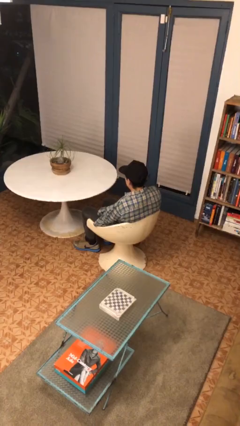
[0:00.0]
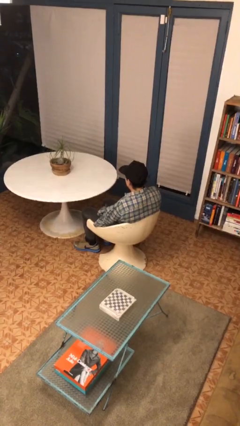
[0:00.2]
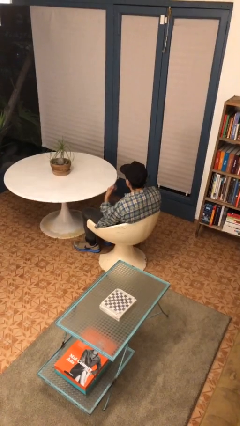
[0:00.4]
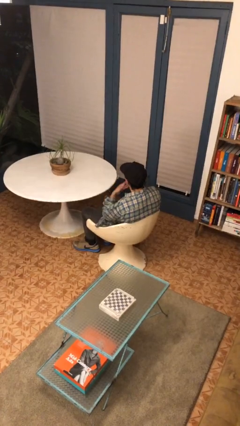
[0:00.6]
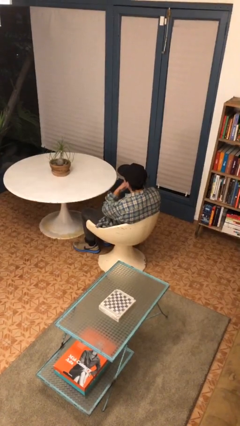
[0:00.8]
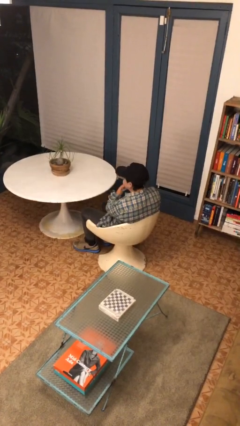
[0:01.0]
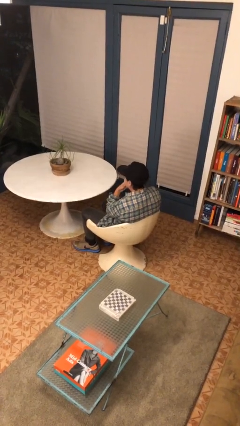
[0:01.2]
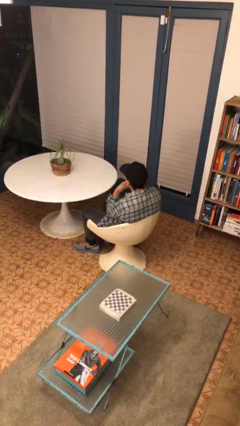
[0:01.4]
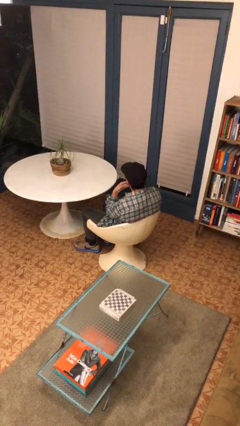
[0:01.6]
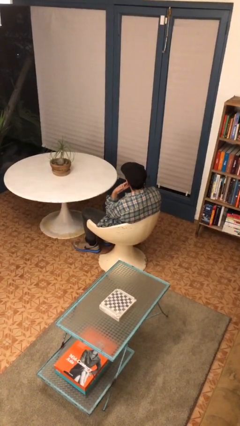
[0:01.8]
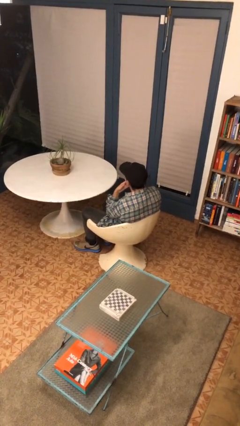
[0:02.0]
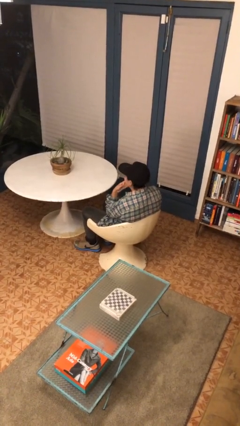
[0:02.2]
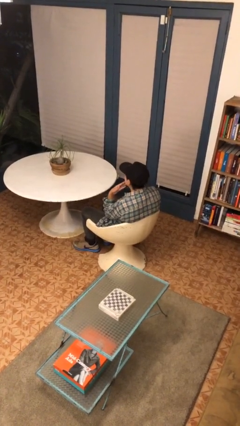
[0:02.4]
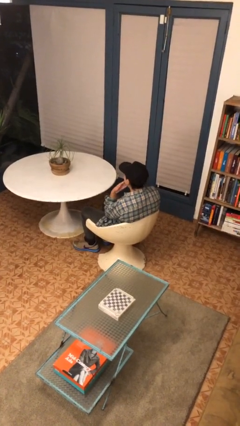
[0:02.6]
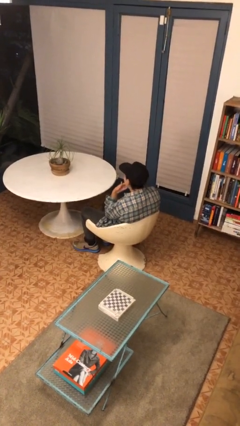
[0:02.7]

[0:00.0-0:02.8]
person strokes chin

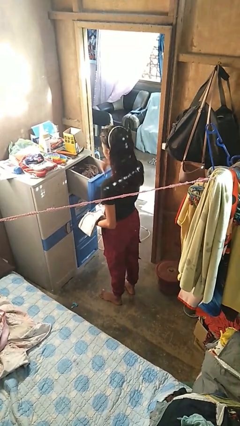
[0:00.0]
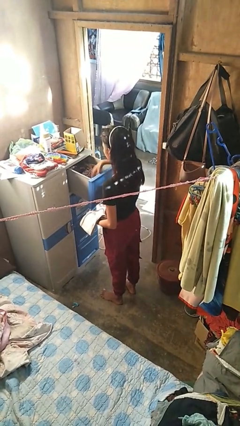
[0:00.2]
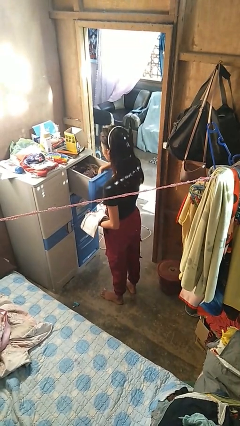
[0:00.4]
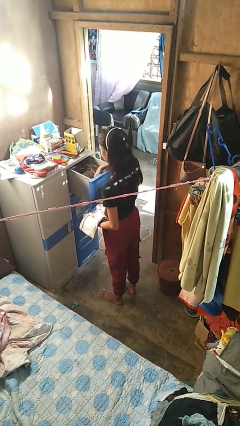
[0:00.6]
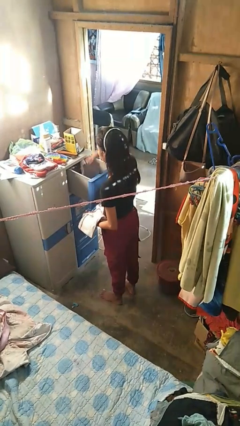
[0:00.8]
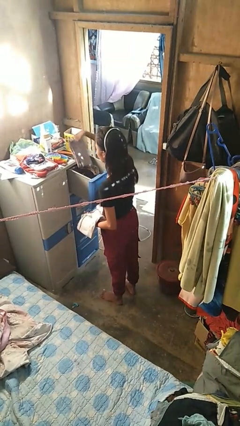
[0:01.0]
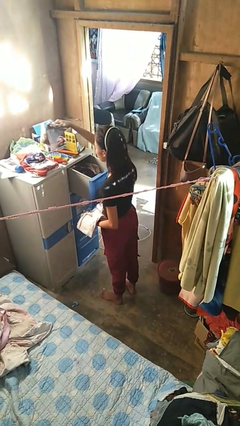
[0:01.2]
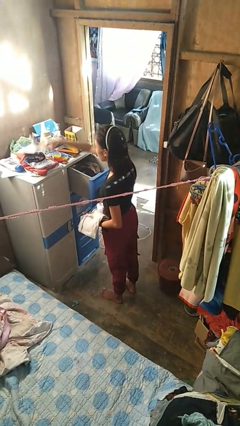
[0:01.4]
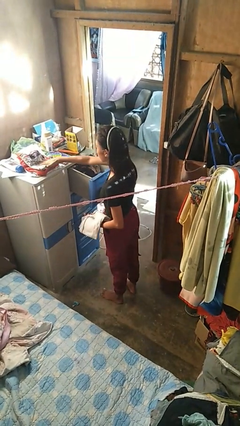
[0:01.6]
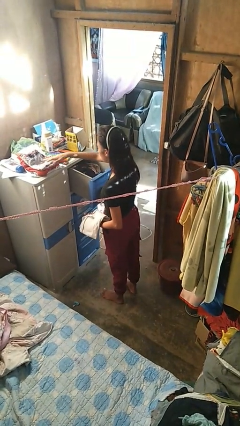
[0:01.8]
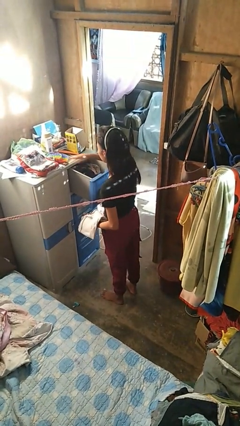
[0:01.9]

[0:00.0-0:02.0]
person takes clothes from dresser

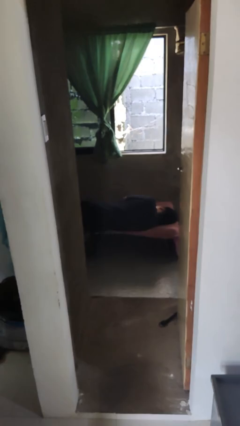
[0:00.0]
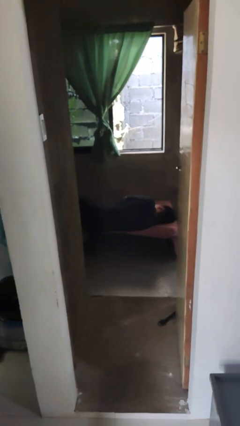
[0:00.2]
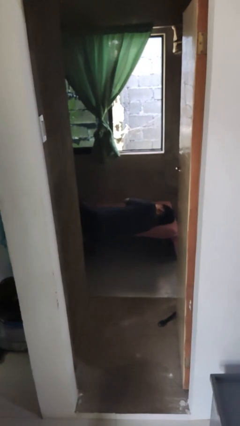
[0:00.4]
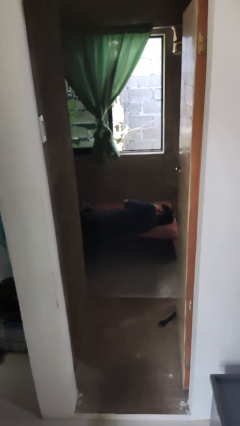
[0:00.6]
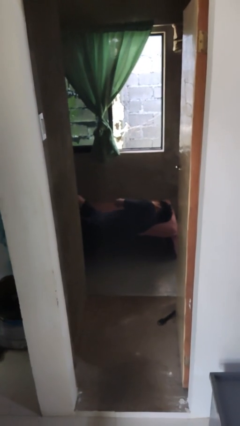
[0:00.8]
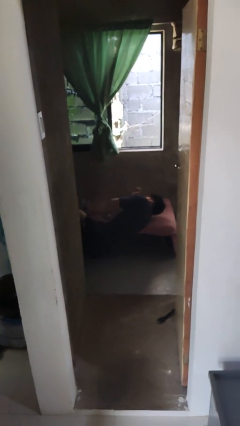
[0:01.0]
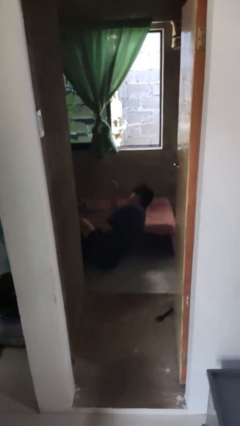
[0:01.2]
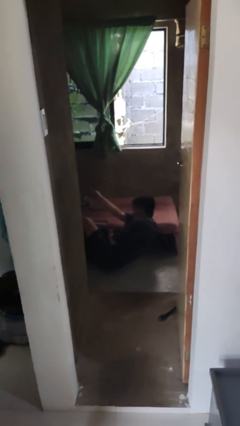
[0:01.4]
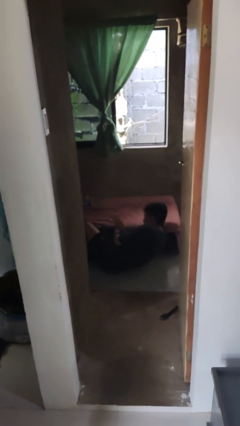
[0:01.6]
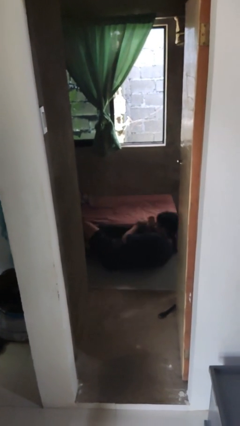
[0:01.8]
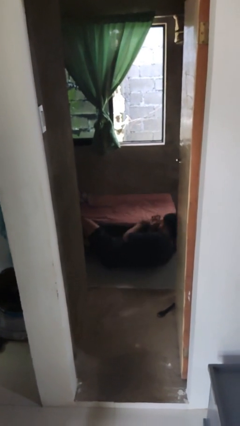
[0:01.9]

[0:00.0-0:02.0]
person falls from bed

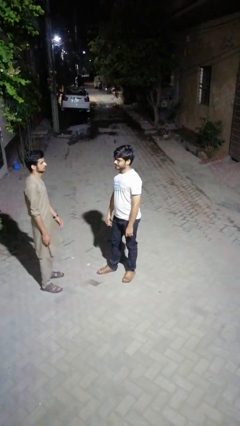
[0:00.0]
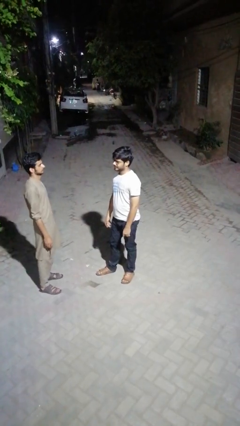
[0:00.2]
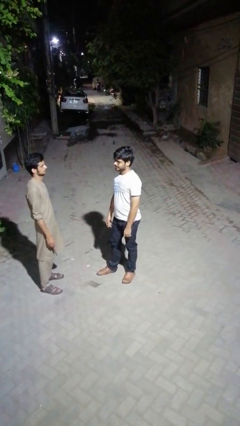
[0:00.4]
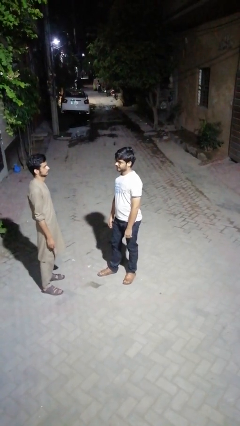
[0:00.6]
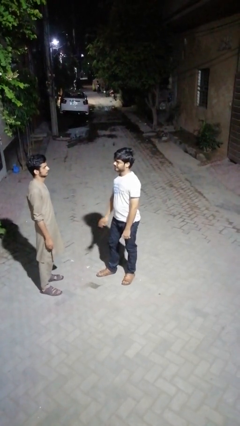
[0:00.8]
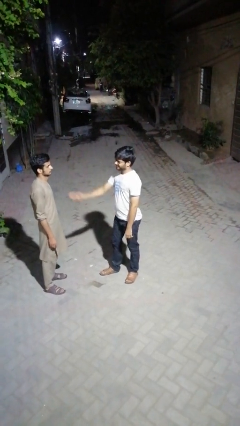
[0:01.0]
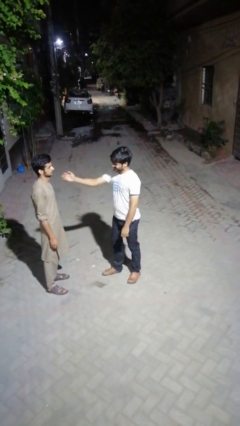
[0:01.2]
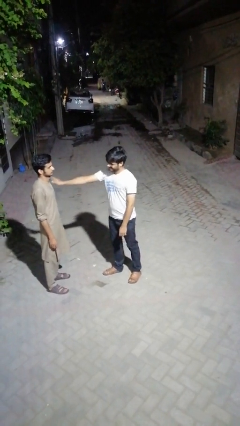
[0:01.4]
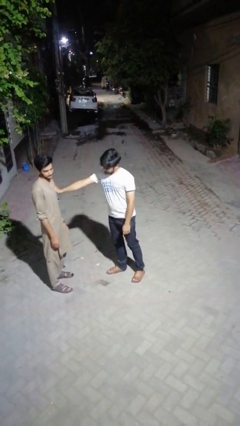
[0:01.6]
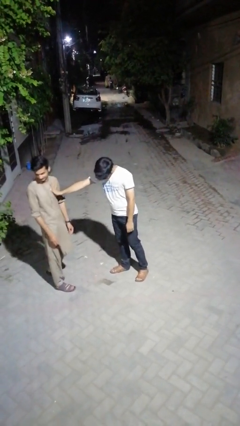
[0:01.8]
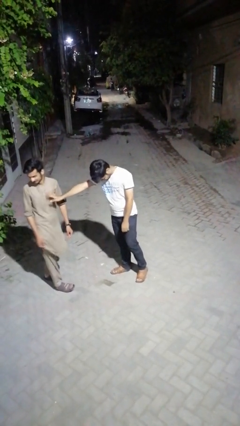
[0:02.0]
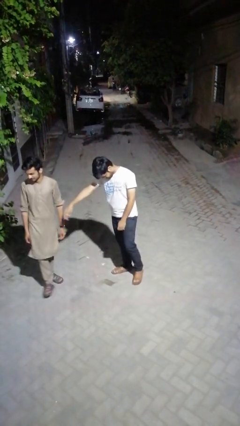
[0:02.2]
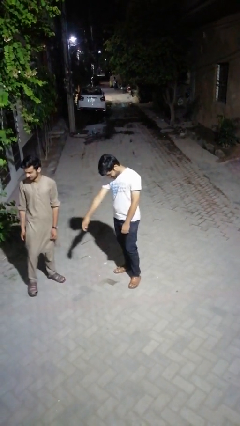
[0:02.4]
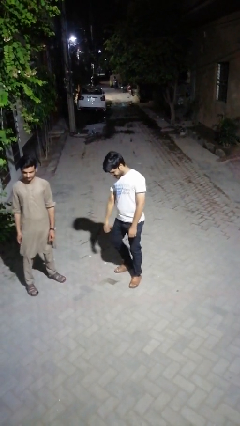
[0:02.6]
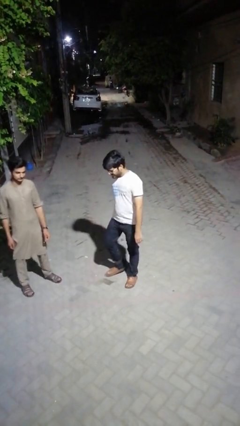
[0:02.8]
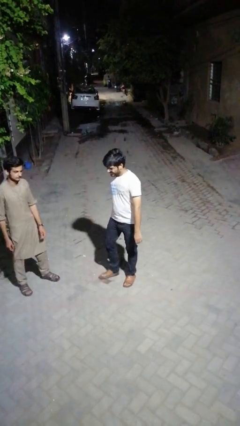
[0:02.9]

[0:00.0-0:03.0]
person shoves person

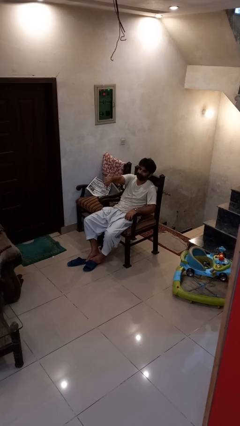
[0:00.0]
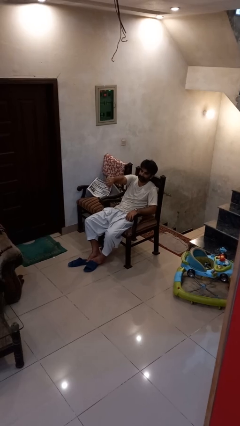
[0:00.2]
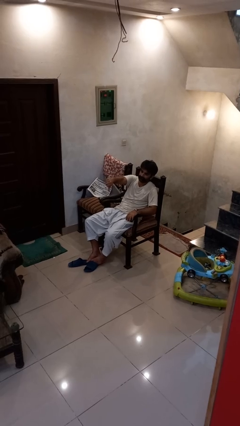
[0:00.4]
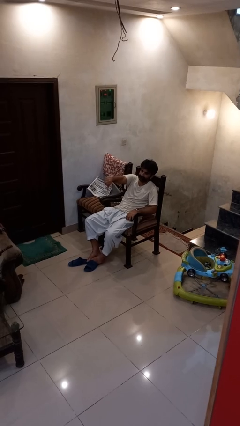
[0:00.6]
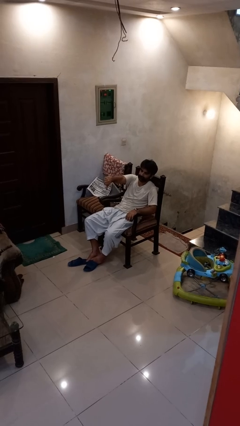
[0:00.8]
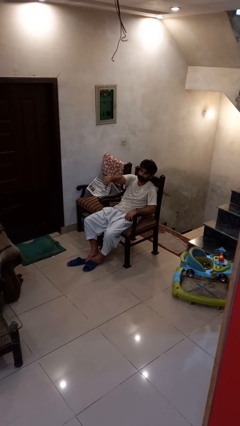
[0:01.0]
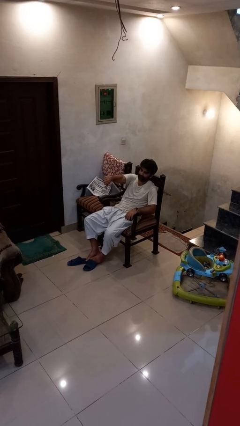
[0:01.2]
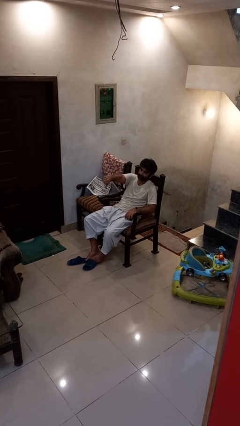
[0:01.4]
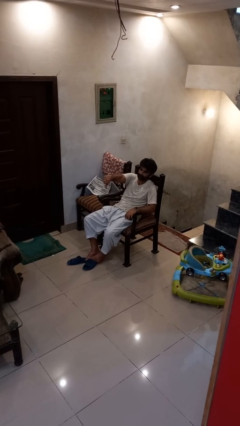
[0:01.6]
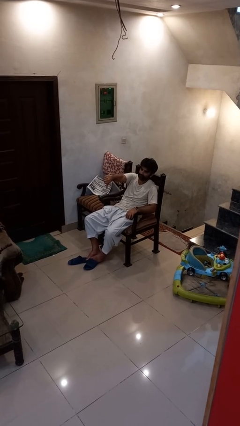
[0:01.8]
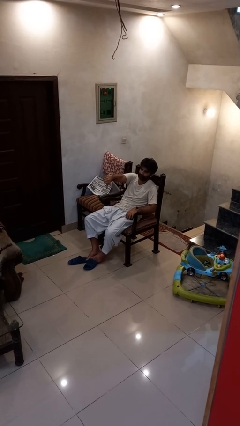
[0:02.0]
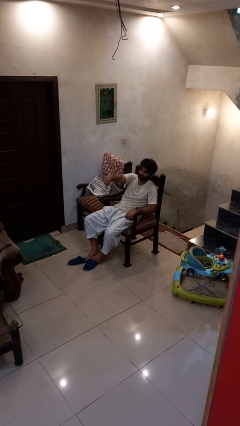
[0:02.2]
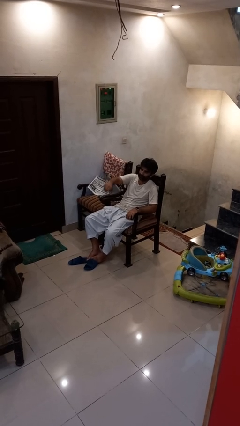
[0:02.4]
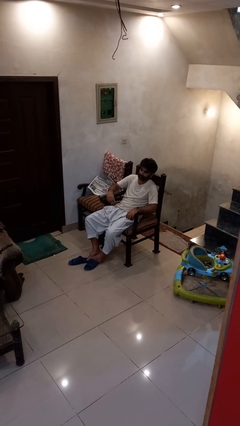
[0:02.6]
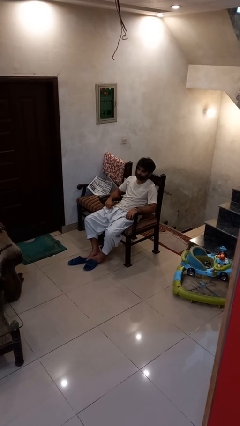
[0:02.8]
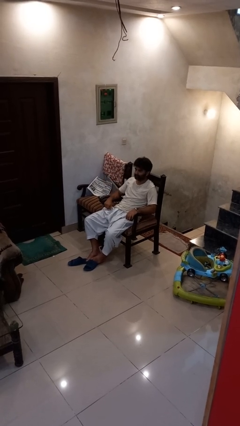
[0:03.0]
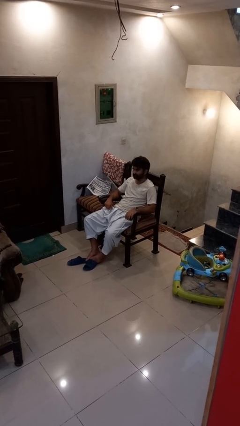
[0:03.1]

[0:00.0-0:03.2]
person gestures thumbs down

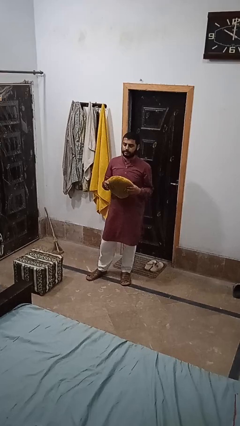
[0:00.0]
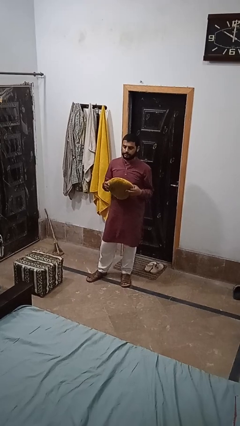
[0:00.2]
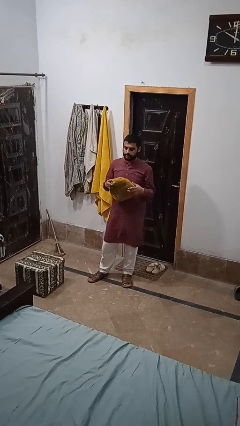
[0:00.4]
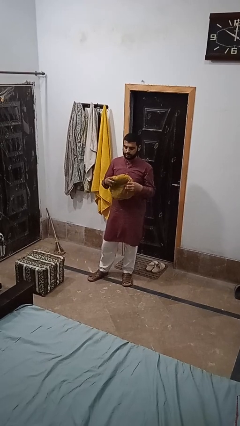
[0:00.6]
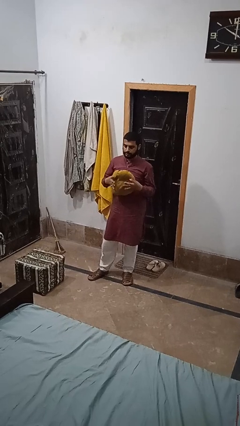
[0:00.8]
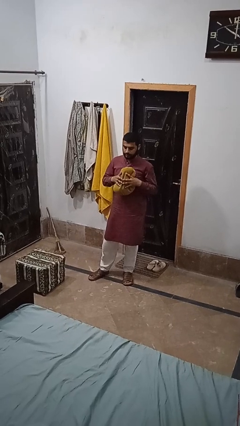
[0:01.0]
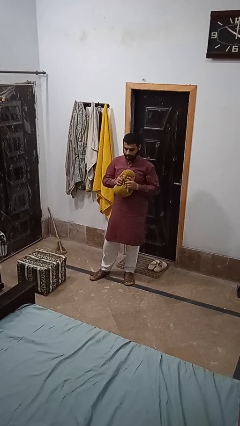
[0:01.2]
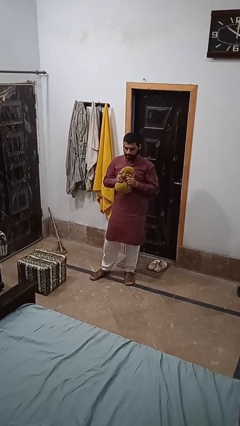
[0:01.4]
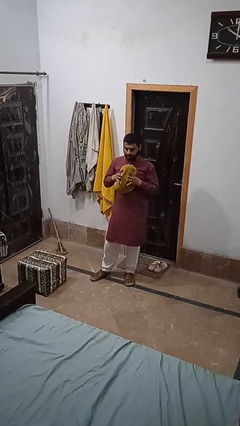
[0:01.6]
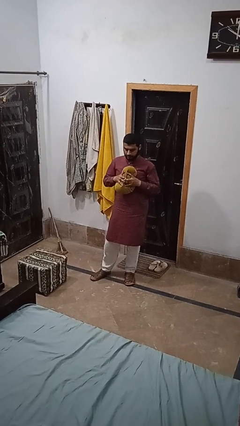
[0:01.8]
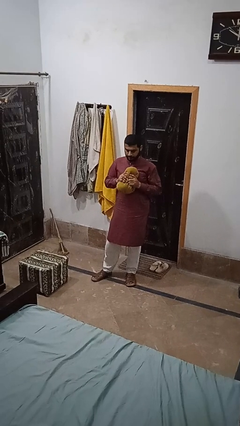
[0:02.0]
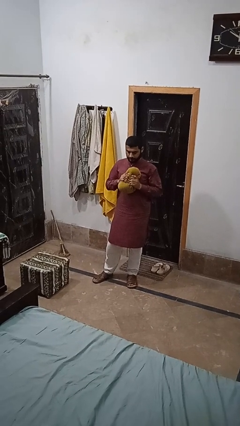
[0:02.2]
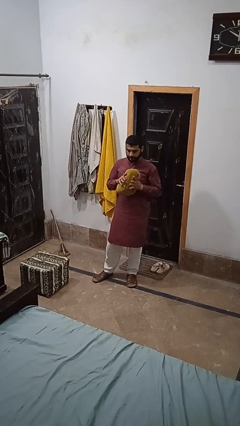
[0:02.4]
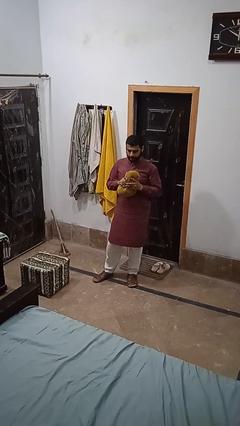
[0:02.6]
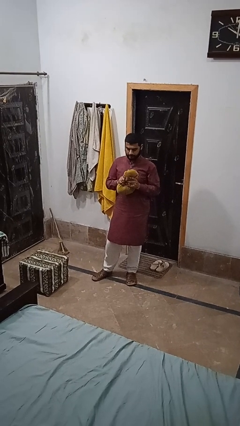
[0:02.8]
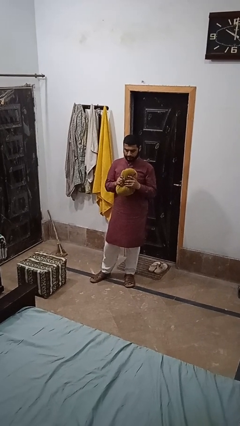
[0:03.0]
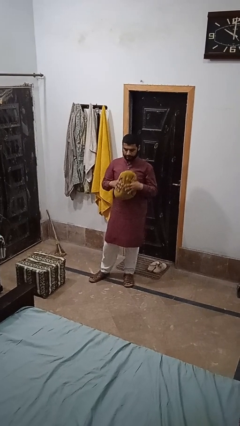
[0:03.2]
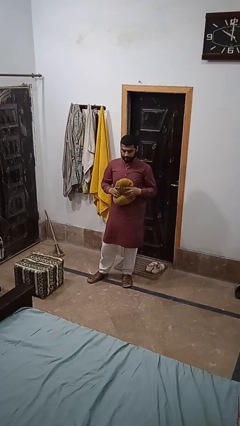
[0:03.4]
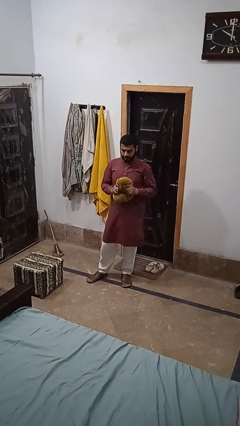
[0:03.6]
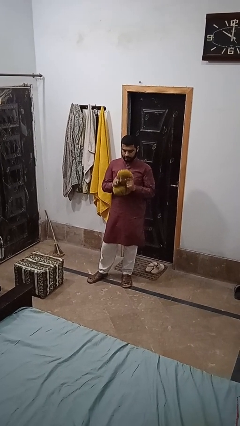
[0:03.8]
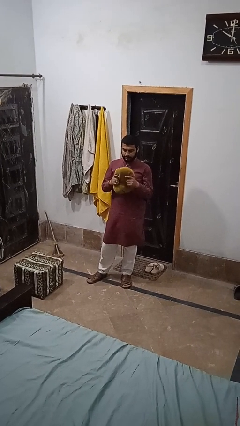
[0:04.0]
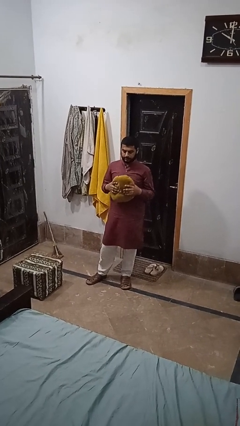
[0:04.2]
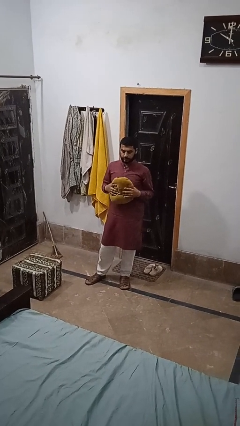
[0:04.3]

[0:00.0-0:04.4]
person squeezes object

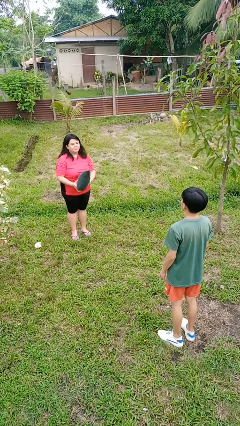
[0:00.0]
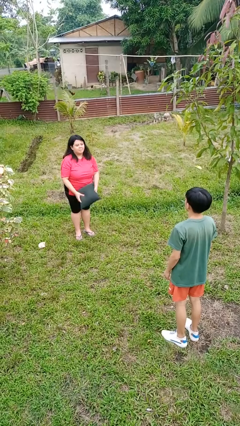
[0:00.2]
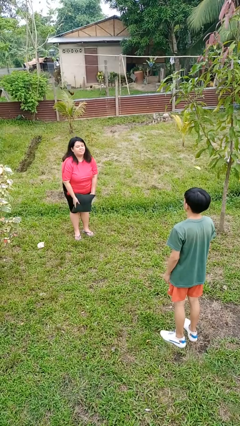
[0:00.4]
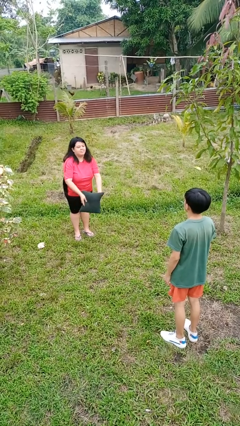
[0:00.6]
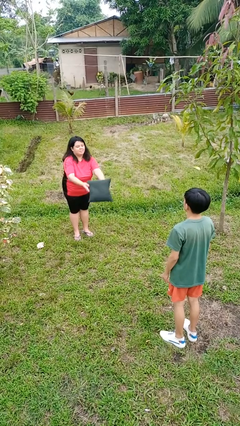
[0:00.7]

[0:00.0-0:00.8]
person throws object to person
